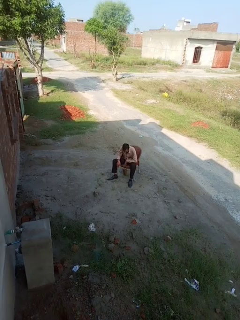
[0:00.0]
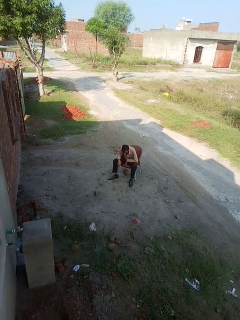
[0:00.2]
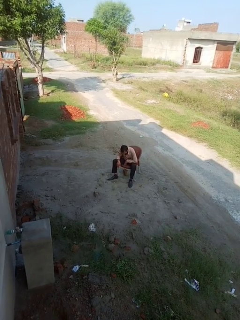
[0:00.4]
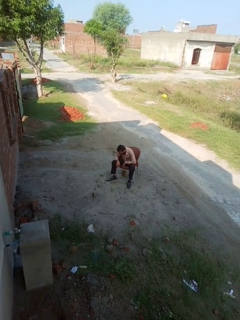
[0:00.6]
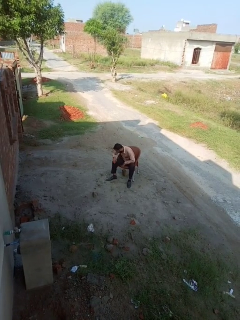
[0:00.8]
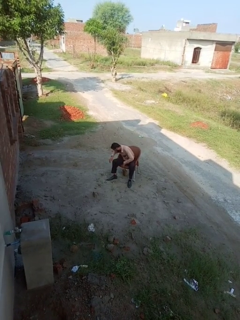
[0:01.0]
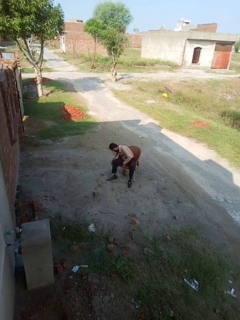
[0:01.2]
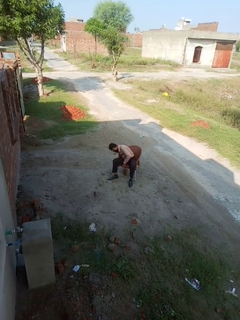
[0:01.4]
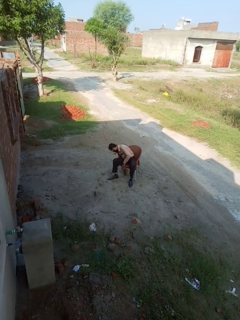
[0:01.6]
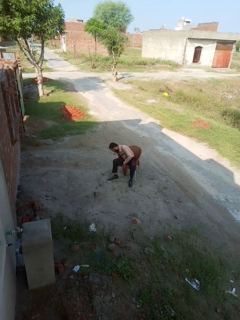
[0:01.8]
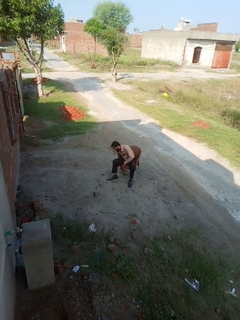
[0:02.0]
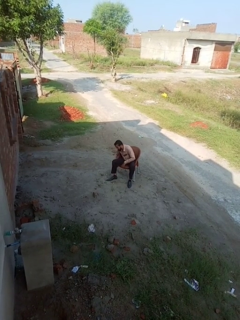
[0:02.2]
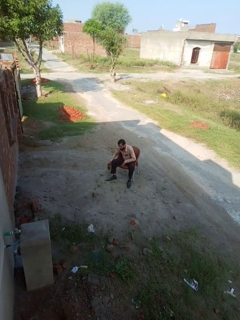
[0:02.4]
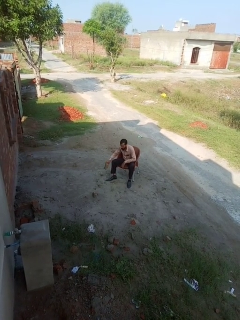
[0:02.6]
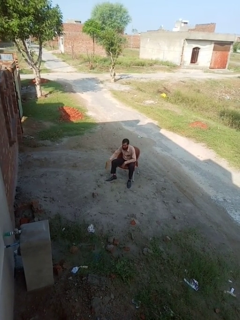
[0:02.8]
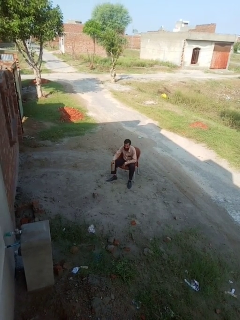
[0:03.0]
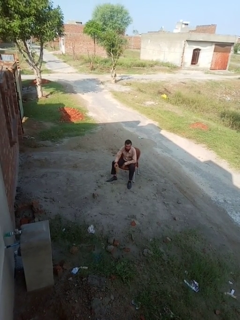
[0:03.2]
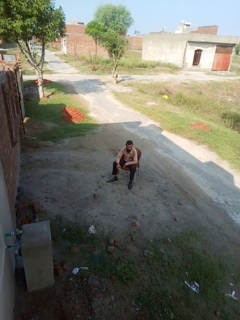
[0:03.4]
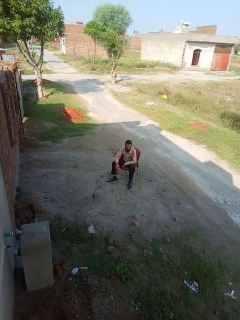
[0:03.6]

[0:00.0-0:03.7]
person picks up object from floor

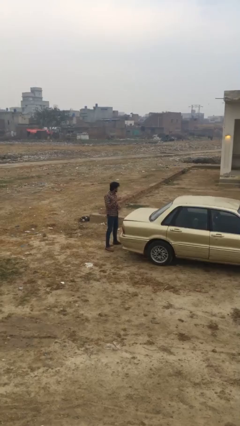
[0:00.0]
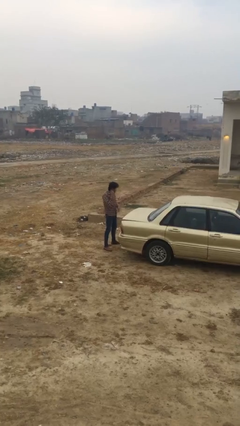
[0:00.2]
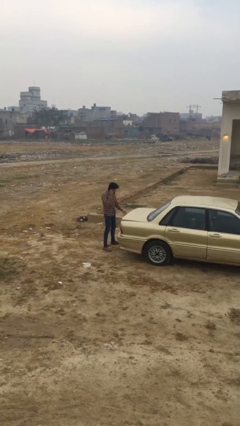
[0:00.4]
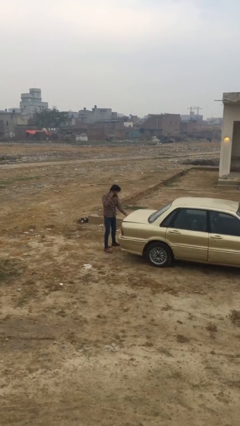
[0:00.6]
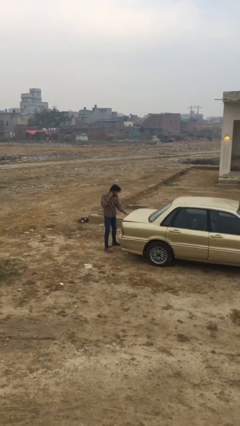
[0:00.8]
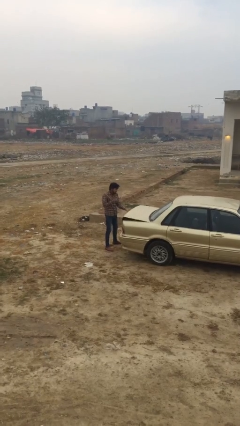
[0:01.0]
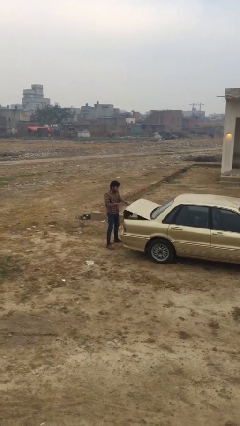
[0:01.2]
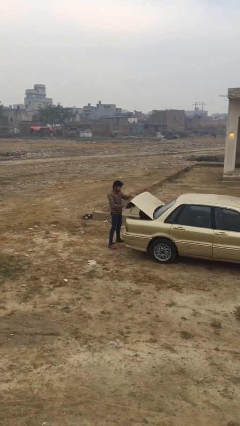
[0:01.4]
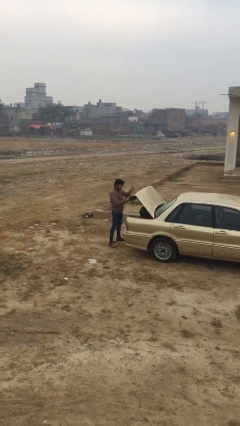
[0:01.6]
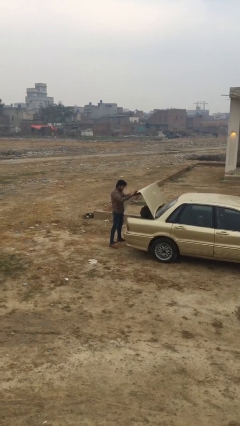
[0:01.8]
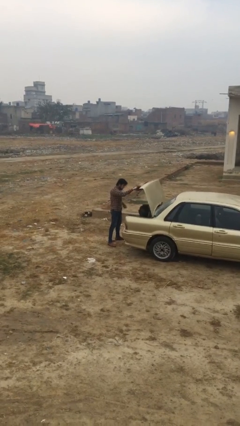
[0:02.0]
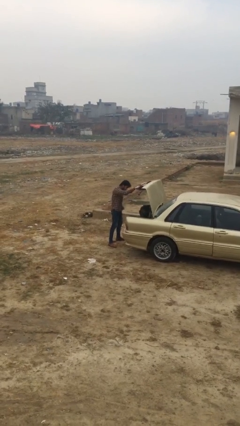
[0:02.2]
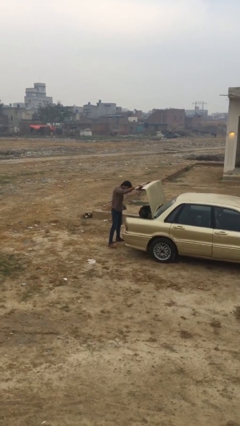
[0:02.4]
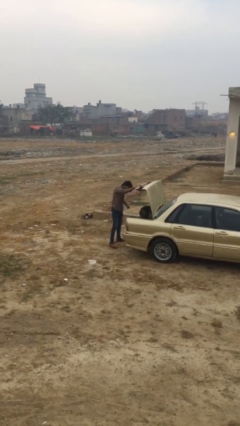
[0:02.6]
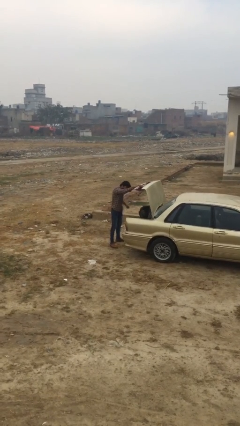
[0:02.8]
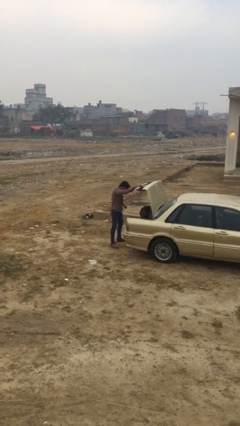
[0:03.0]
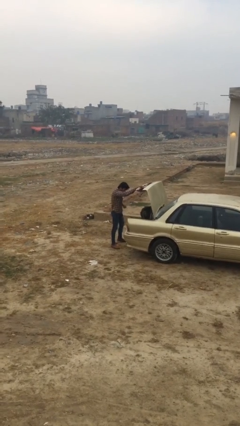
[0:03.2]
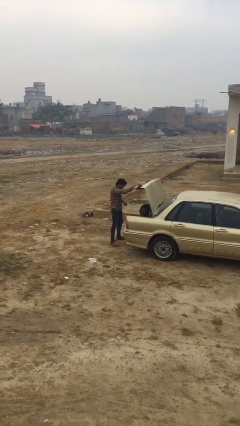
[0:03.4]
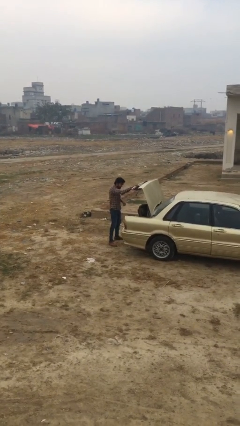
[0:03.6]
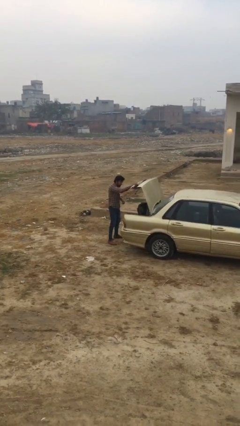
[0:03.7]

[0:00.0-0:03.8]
person opens car trunk

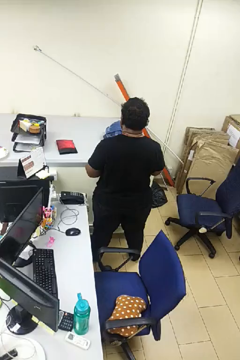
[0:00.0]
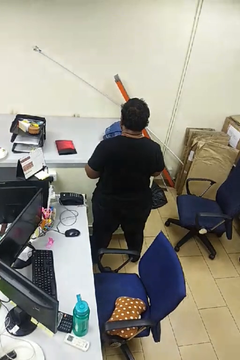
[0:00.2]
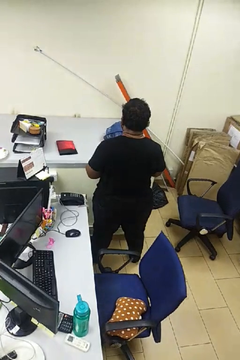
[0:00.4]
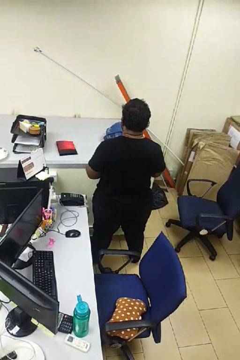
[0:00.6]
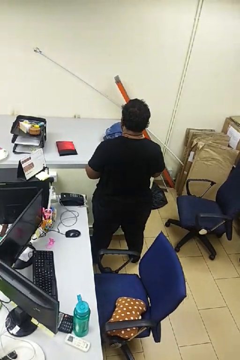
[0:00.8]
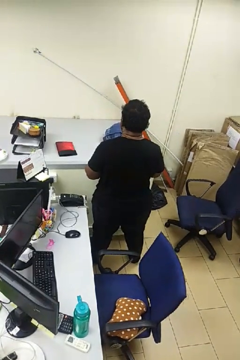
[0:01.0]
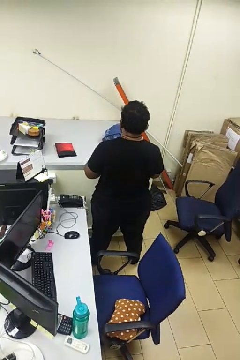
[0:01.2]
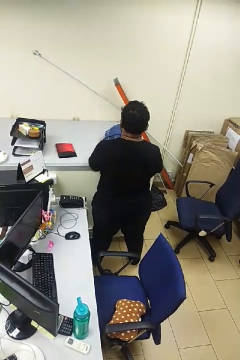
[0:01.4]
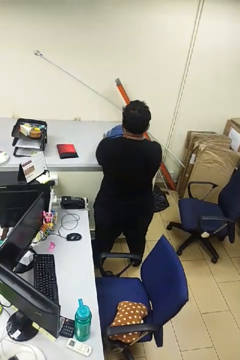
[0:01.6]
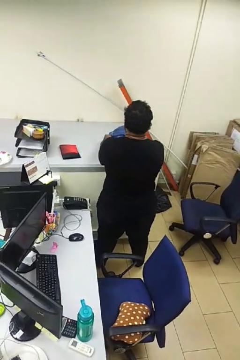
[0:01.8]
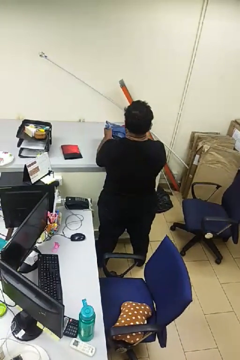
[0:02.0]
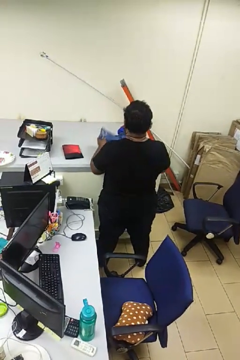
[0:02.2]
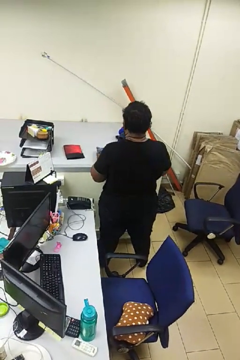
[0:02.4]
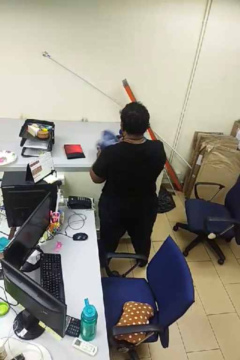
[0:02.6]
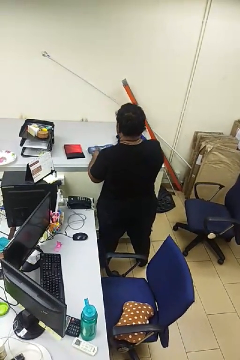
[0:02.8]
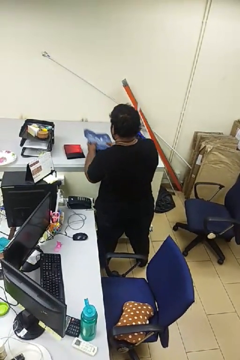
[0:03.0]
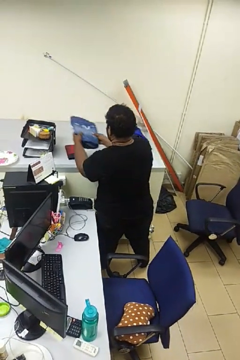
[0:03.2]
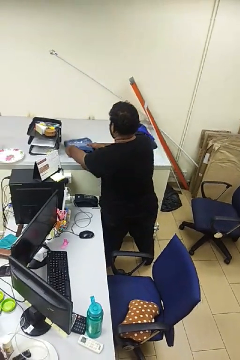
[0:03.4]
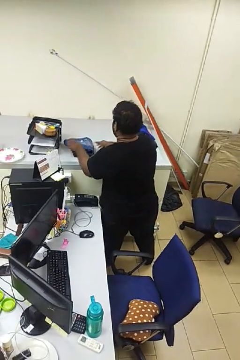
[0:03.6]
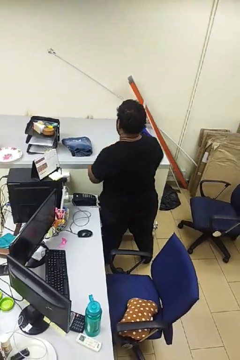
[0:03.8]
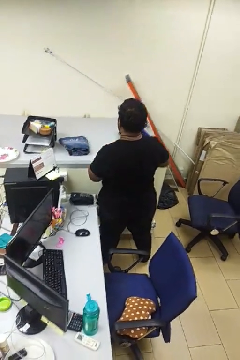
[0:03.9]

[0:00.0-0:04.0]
person folds pants

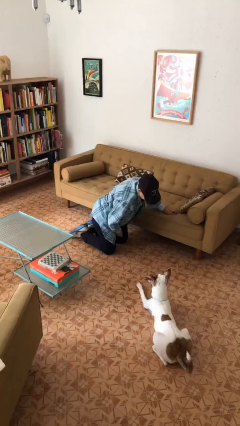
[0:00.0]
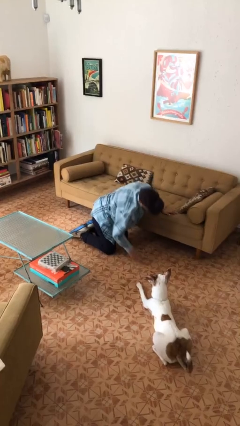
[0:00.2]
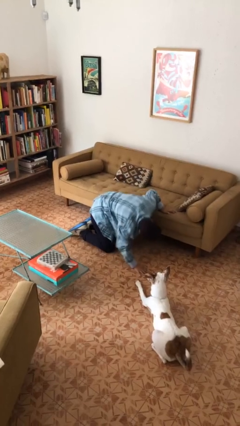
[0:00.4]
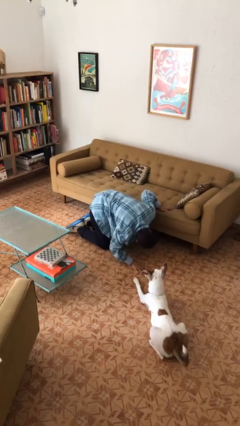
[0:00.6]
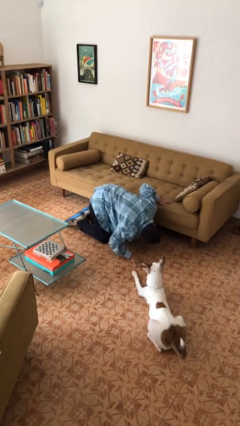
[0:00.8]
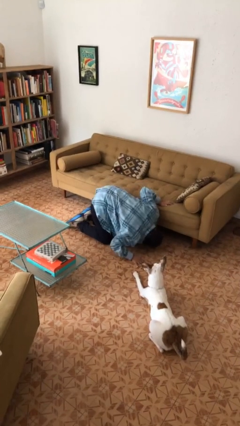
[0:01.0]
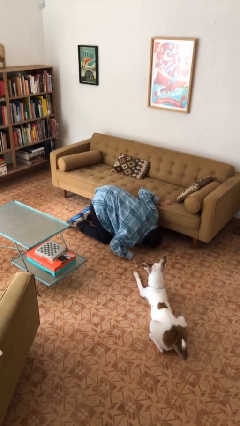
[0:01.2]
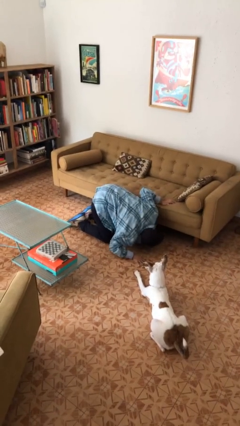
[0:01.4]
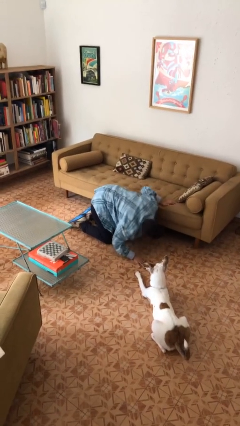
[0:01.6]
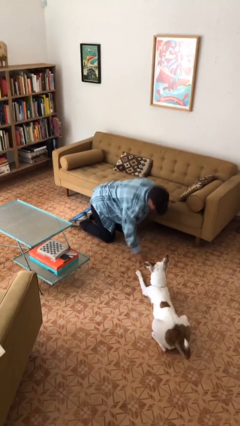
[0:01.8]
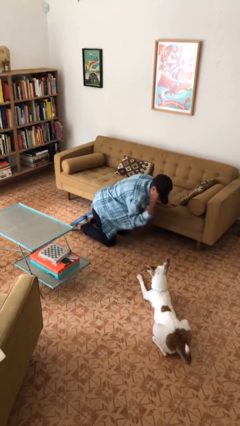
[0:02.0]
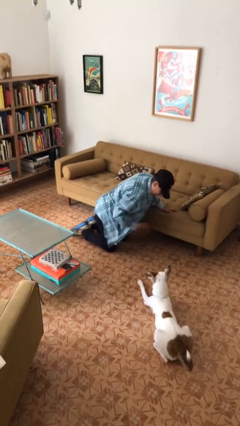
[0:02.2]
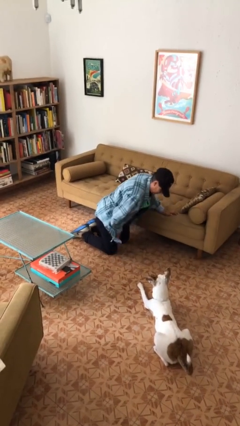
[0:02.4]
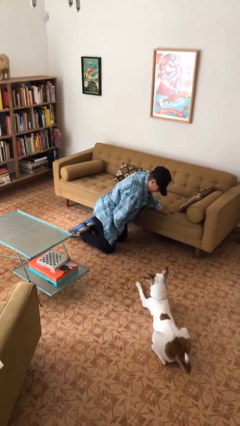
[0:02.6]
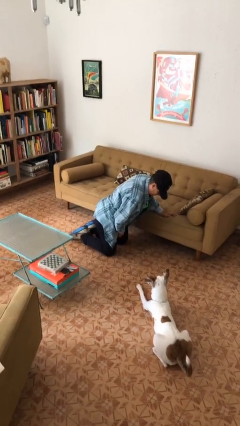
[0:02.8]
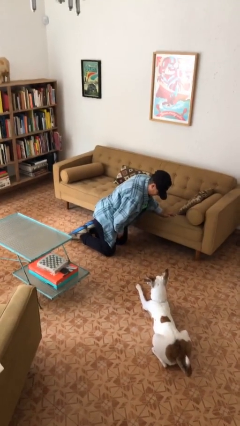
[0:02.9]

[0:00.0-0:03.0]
person searches under couch

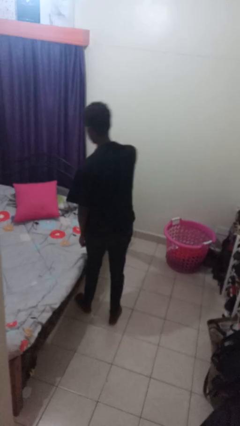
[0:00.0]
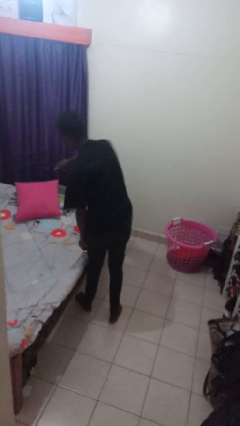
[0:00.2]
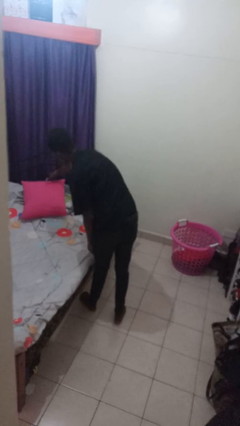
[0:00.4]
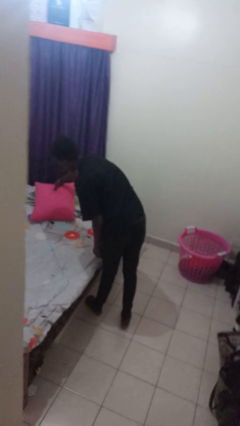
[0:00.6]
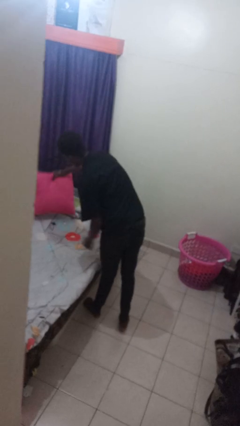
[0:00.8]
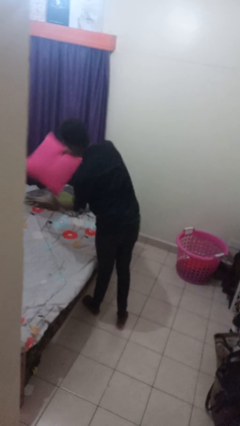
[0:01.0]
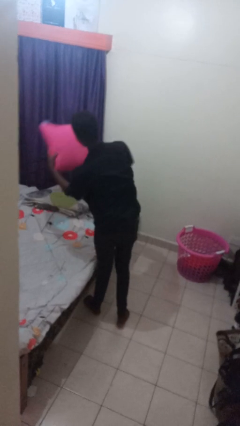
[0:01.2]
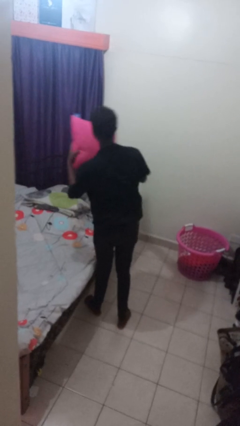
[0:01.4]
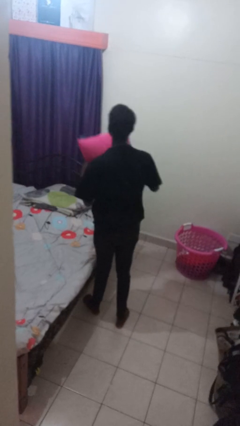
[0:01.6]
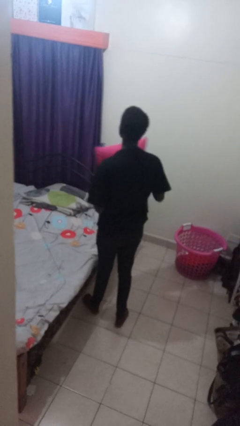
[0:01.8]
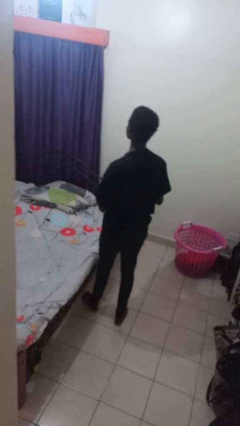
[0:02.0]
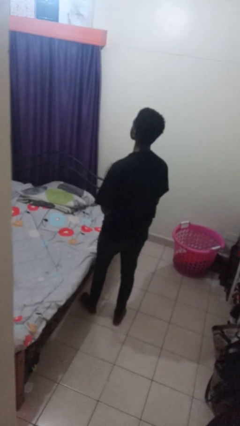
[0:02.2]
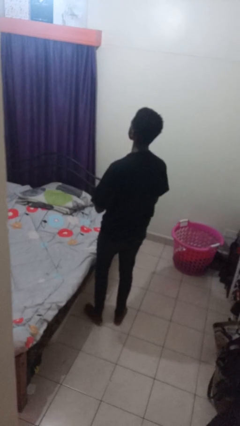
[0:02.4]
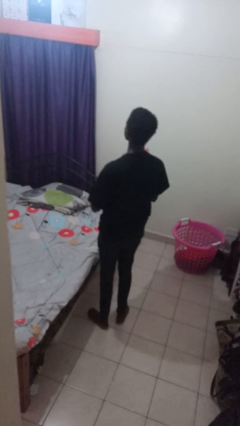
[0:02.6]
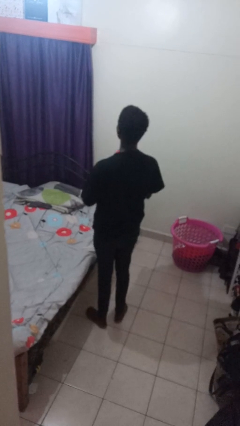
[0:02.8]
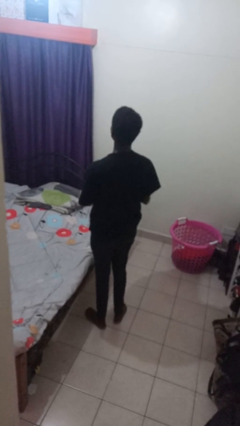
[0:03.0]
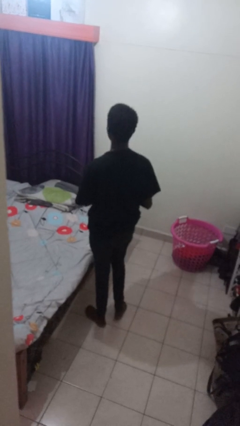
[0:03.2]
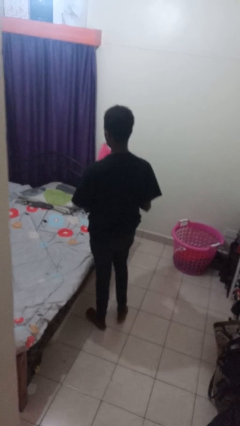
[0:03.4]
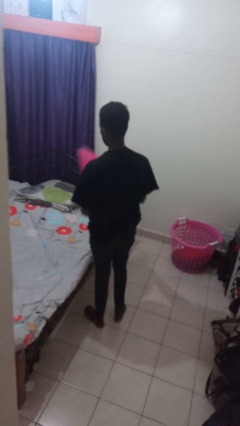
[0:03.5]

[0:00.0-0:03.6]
person picks up object from bed

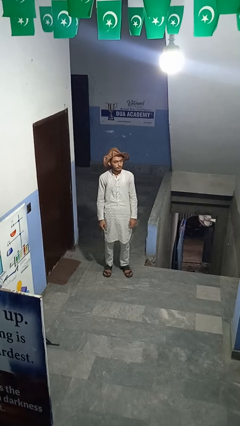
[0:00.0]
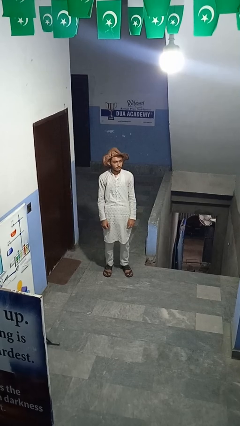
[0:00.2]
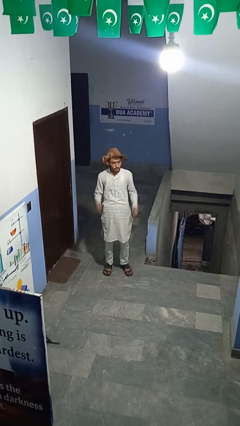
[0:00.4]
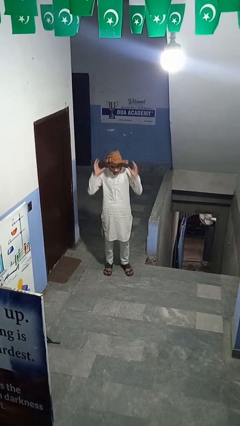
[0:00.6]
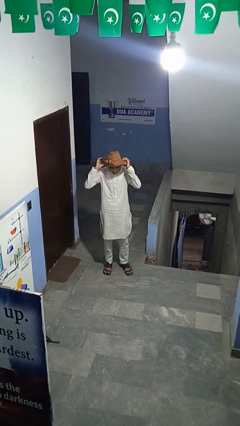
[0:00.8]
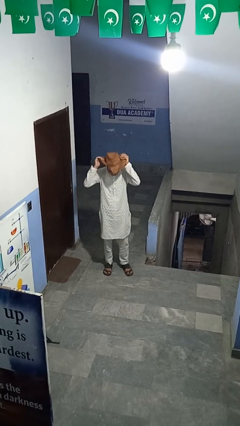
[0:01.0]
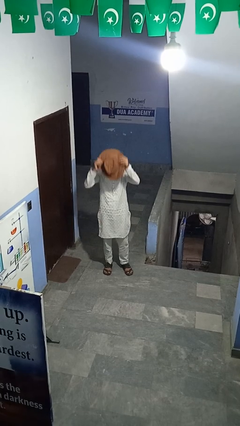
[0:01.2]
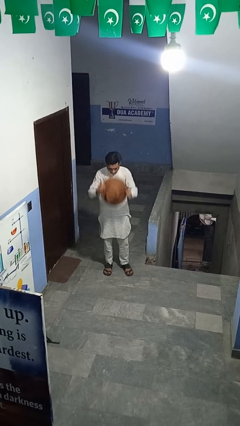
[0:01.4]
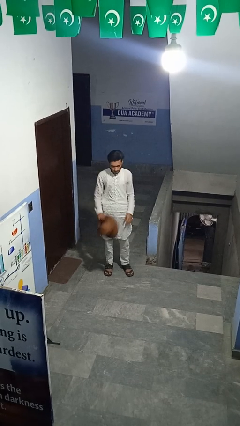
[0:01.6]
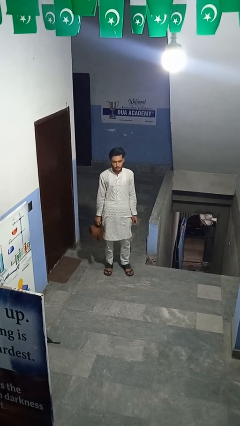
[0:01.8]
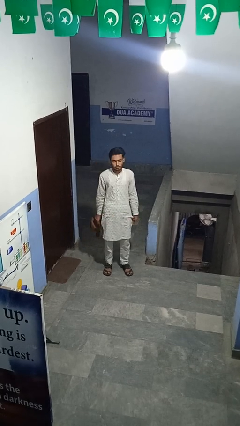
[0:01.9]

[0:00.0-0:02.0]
person takes off hat
